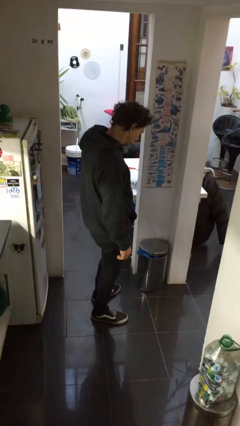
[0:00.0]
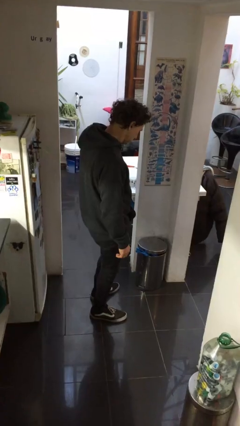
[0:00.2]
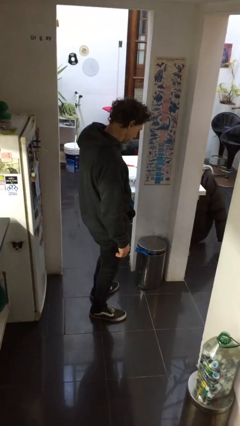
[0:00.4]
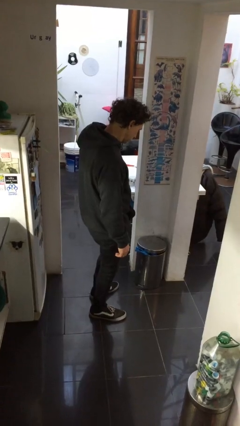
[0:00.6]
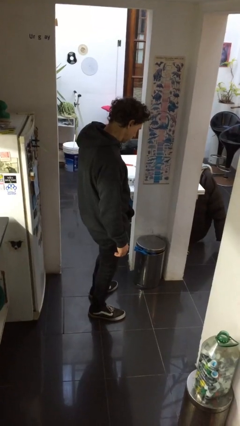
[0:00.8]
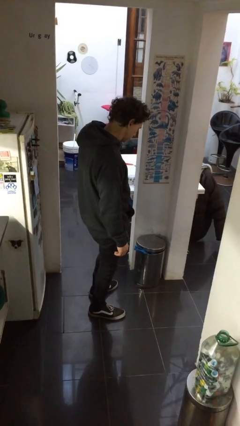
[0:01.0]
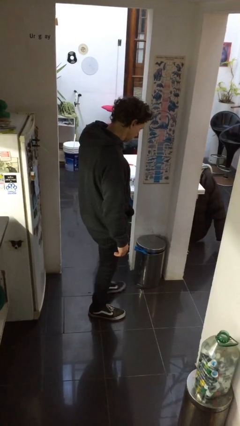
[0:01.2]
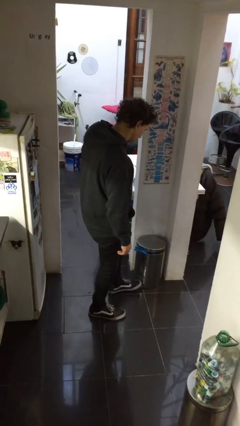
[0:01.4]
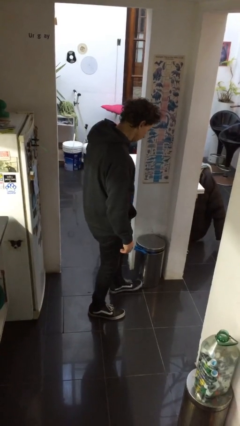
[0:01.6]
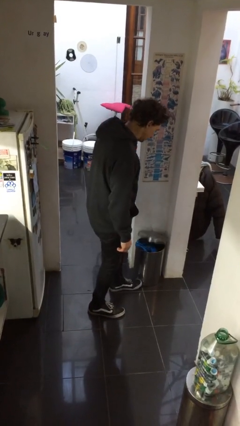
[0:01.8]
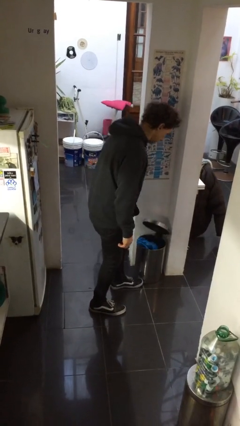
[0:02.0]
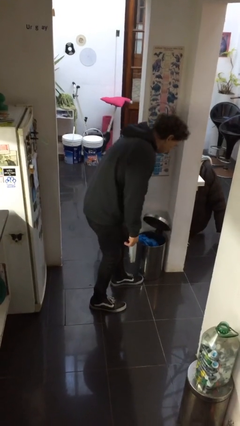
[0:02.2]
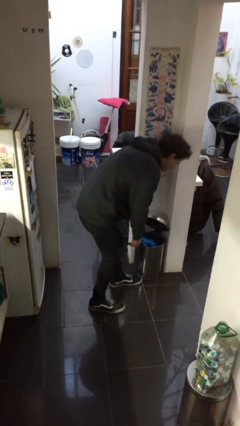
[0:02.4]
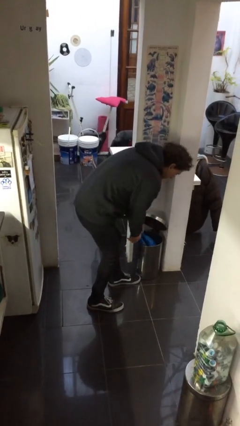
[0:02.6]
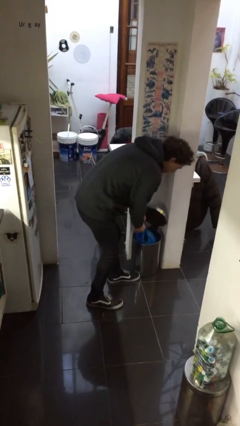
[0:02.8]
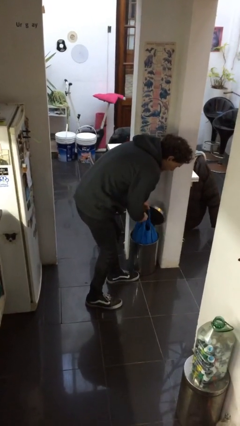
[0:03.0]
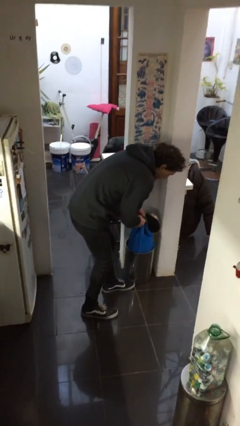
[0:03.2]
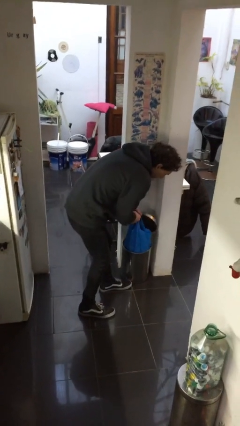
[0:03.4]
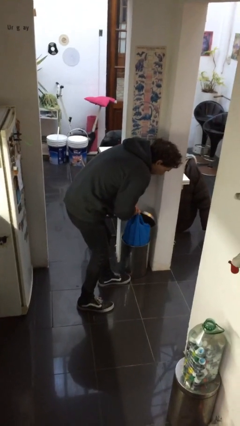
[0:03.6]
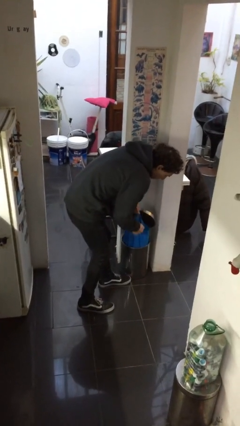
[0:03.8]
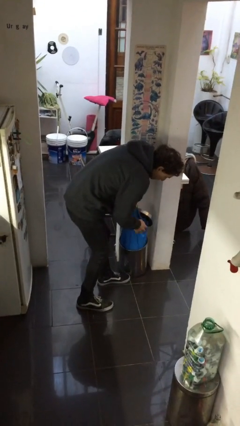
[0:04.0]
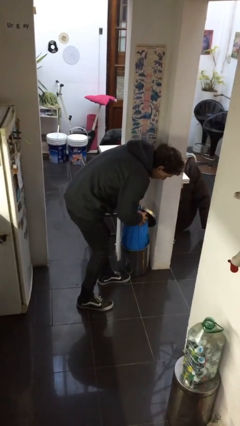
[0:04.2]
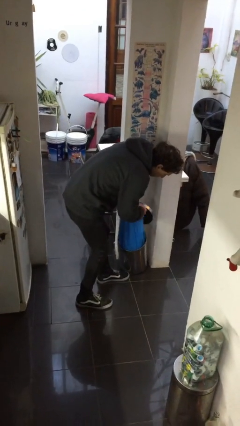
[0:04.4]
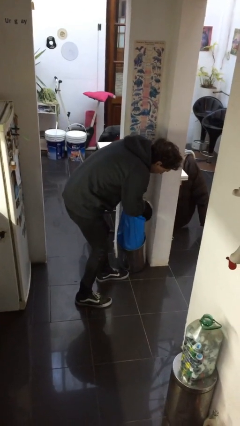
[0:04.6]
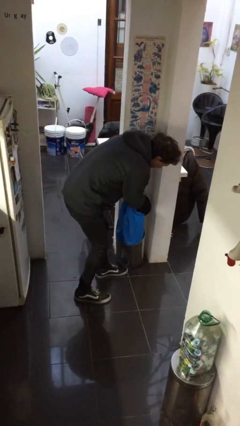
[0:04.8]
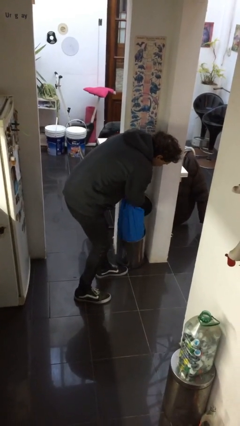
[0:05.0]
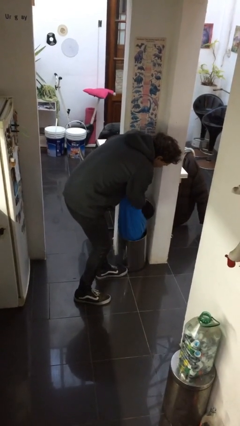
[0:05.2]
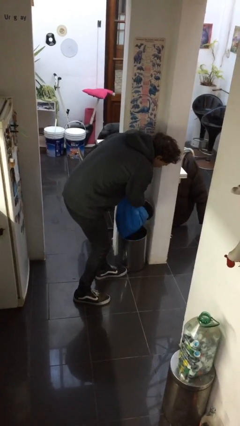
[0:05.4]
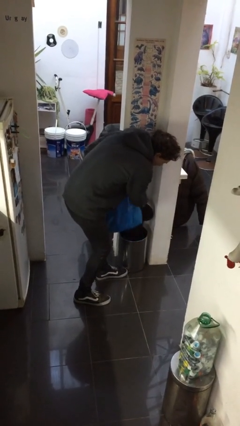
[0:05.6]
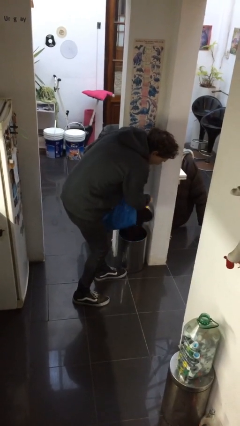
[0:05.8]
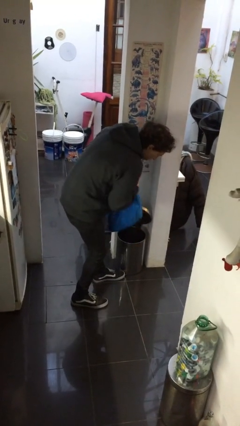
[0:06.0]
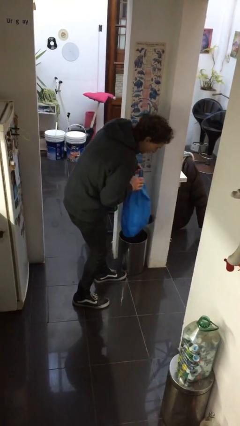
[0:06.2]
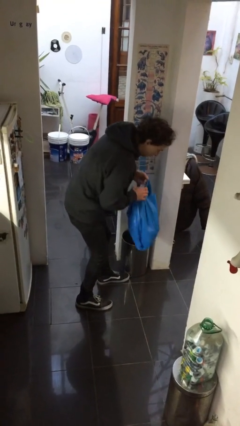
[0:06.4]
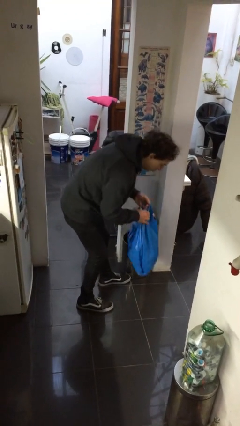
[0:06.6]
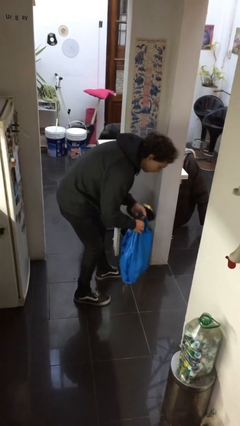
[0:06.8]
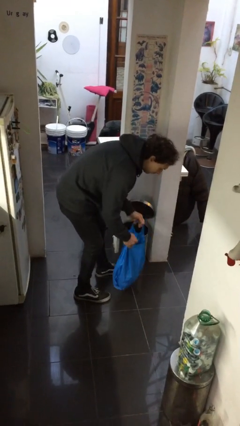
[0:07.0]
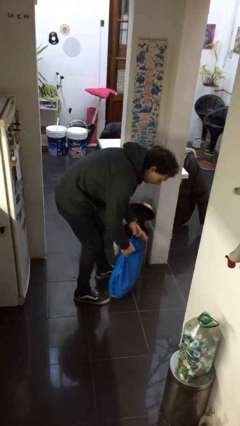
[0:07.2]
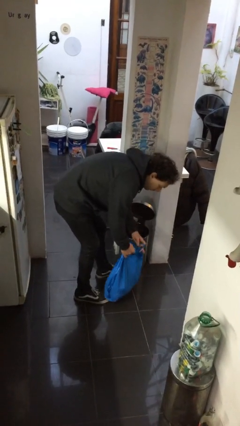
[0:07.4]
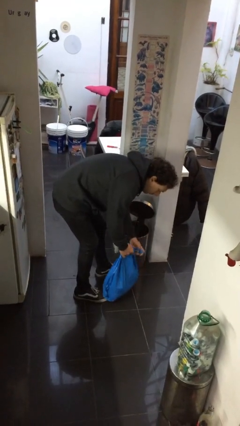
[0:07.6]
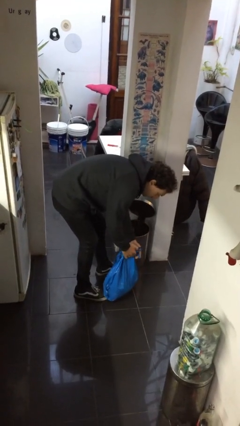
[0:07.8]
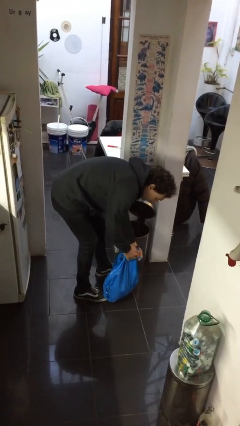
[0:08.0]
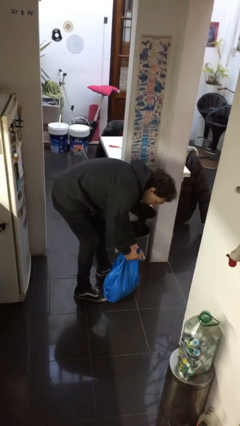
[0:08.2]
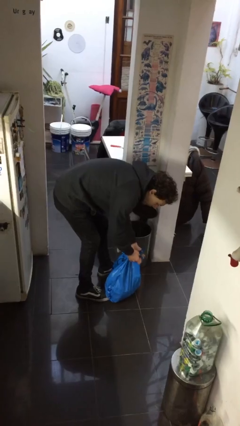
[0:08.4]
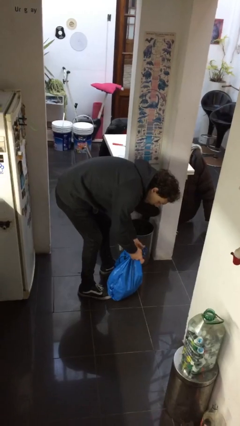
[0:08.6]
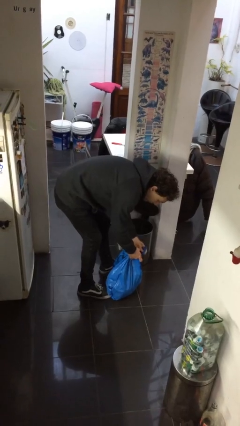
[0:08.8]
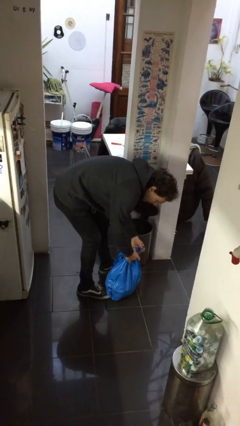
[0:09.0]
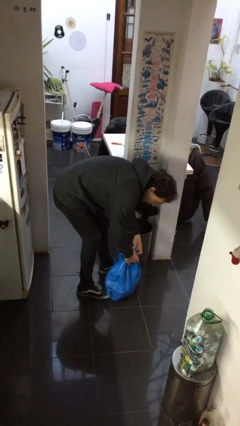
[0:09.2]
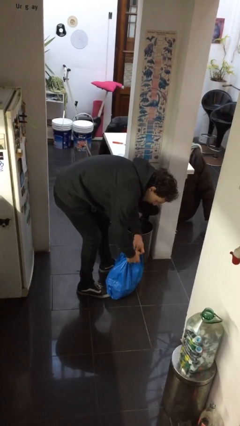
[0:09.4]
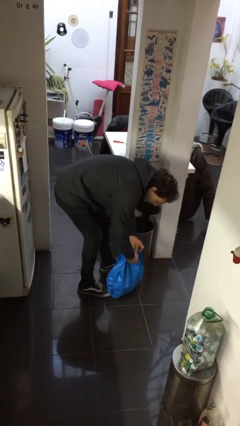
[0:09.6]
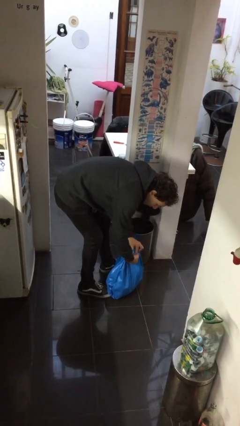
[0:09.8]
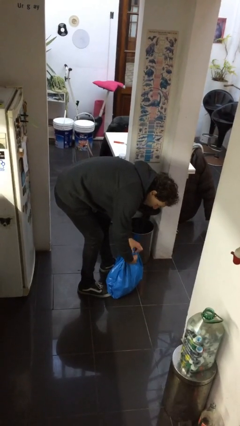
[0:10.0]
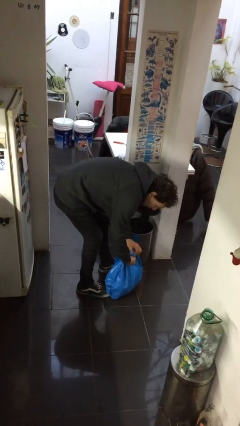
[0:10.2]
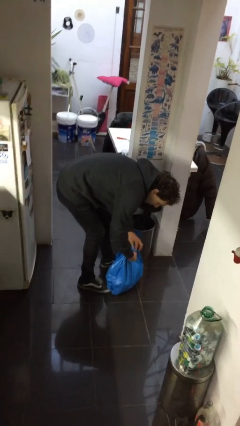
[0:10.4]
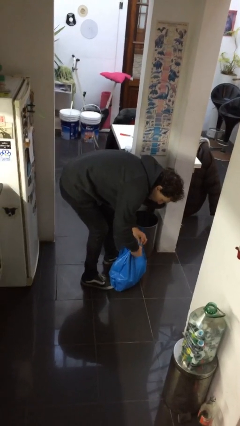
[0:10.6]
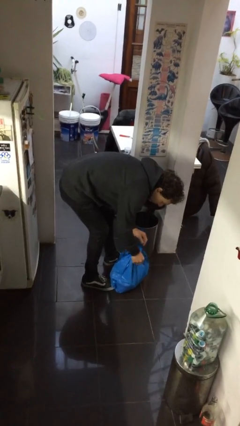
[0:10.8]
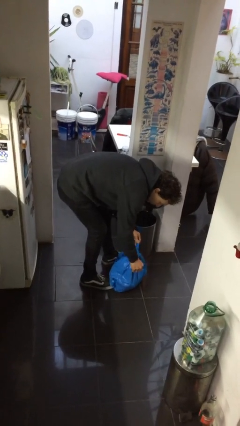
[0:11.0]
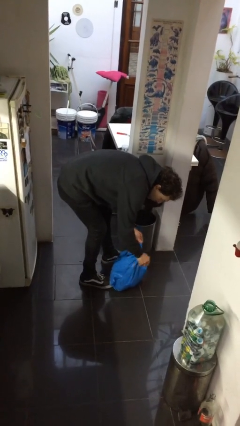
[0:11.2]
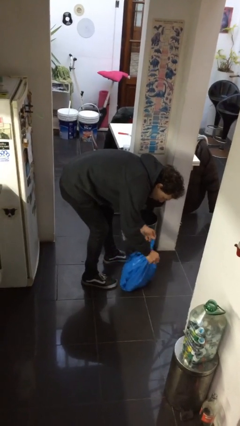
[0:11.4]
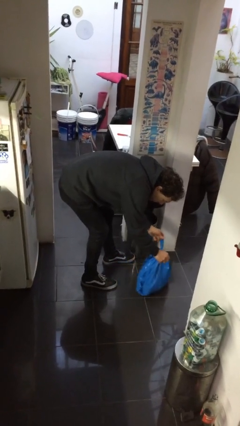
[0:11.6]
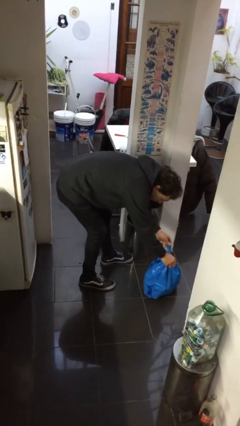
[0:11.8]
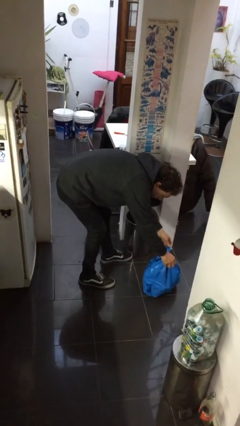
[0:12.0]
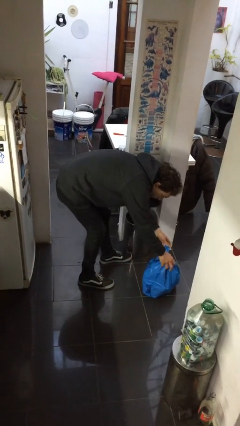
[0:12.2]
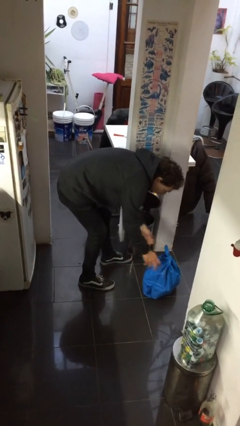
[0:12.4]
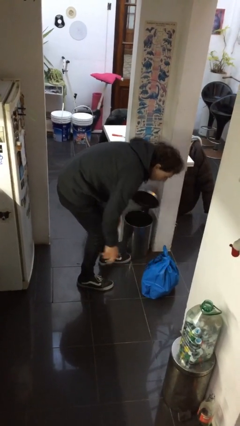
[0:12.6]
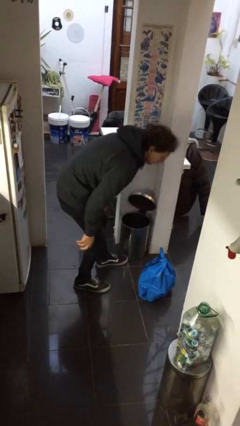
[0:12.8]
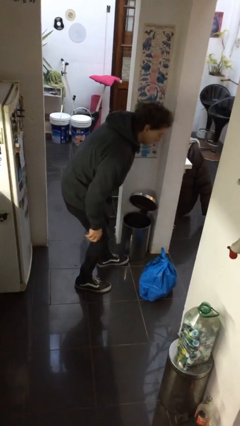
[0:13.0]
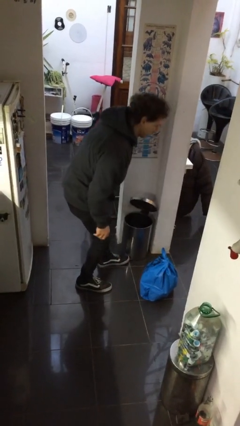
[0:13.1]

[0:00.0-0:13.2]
person removes trashbag from trashcan

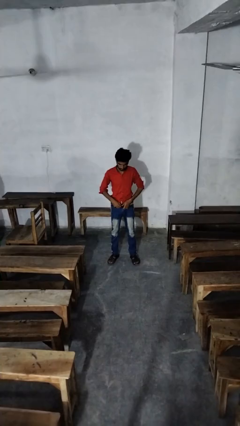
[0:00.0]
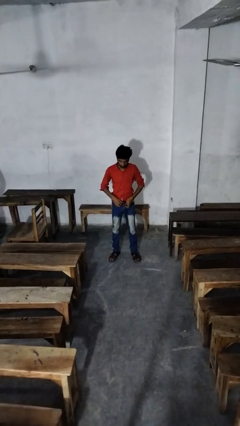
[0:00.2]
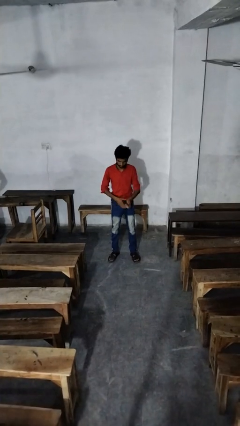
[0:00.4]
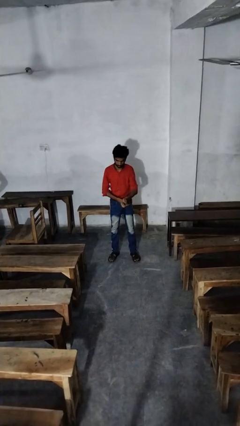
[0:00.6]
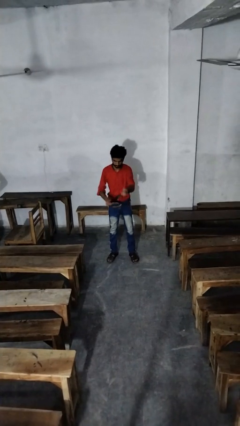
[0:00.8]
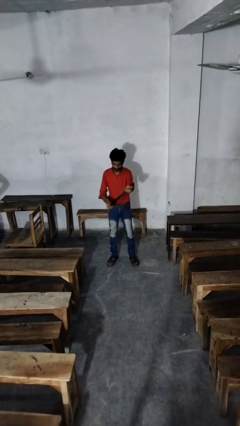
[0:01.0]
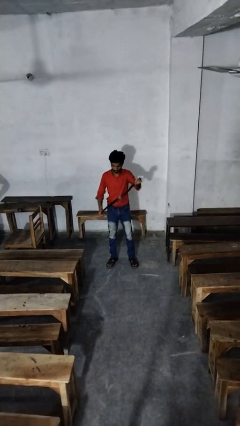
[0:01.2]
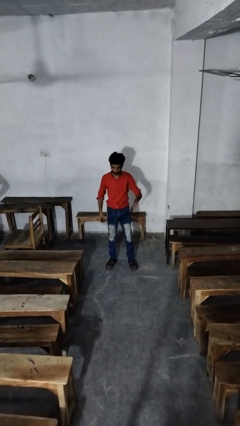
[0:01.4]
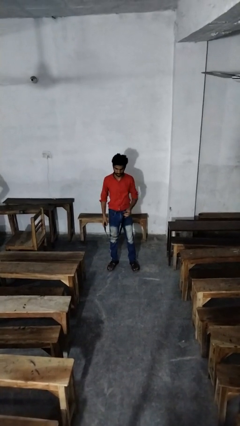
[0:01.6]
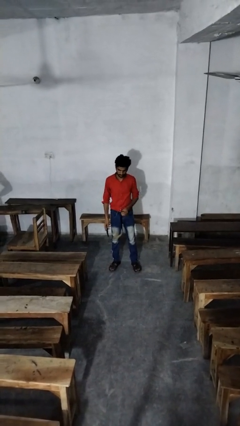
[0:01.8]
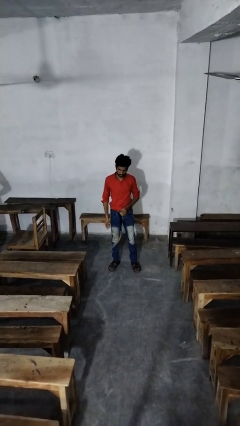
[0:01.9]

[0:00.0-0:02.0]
person takes off belt

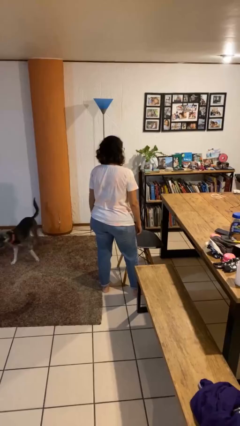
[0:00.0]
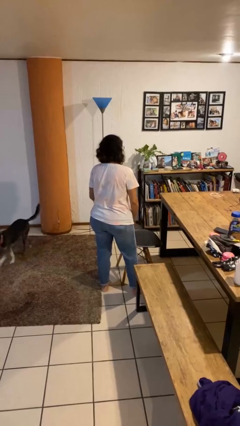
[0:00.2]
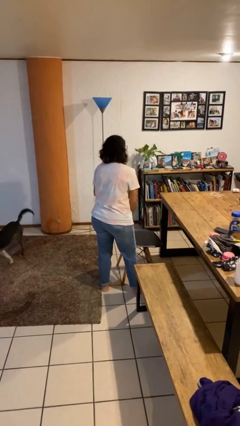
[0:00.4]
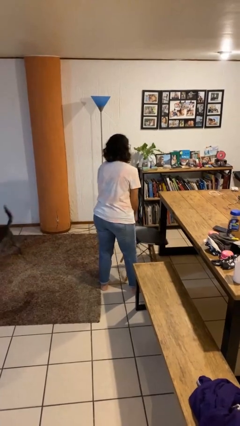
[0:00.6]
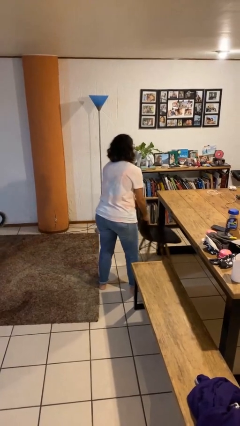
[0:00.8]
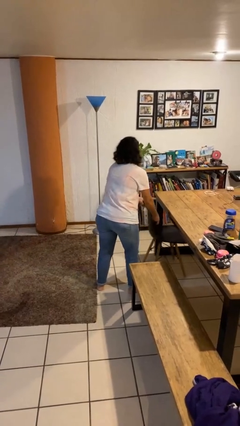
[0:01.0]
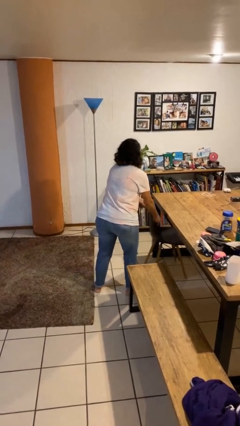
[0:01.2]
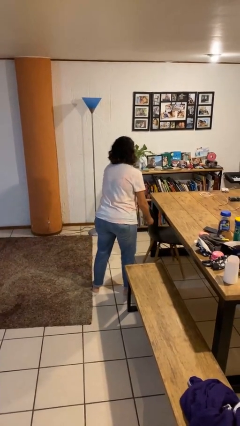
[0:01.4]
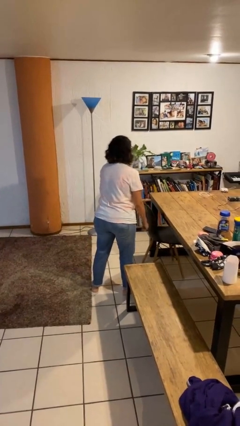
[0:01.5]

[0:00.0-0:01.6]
person pushes in chair

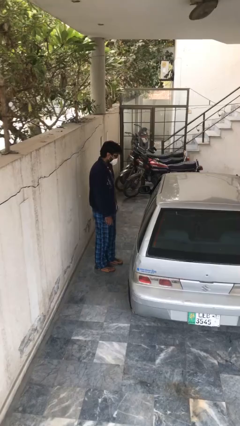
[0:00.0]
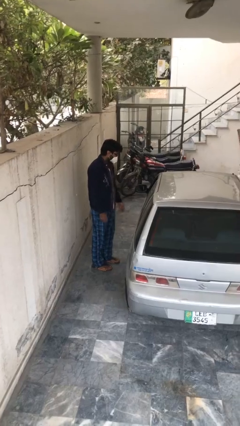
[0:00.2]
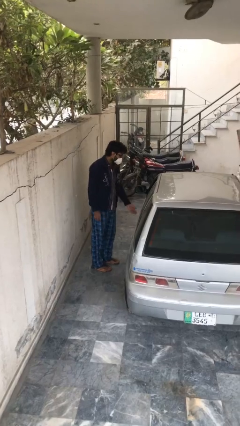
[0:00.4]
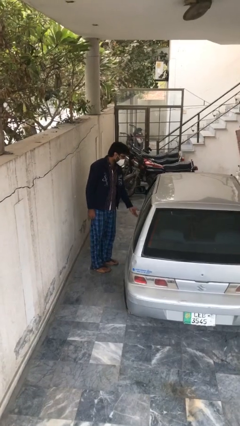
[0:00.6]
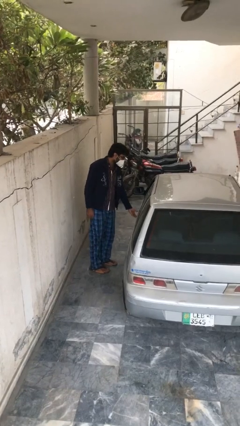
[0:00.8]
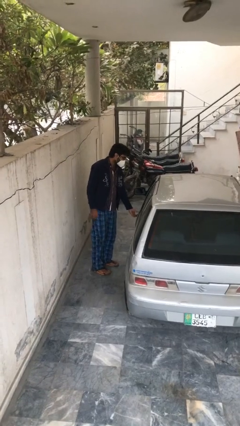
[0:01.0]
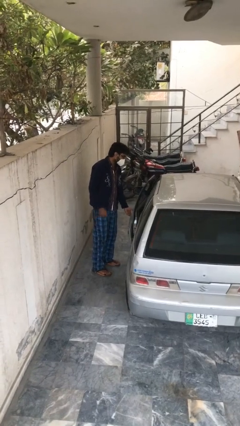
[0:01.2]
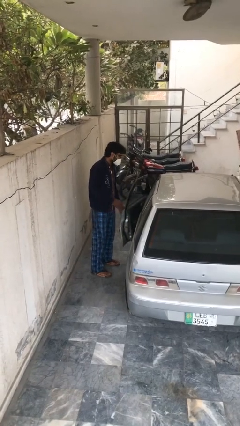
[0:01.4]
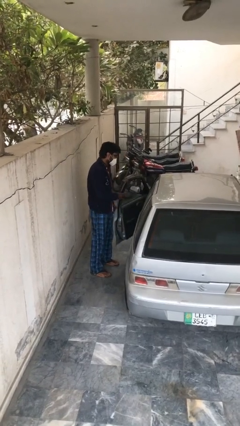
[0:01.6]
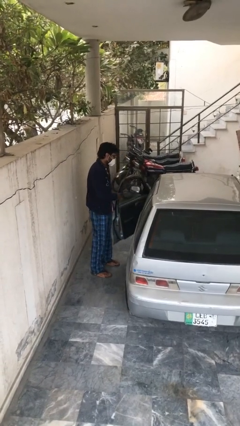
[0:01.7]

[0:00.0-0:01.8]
person opens car door
